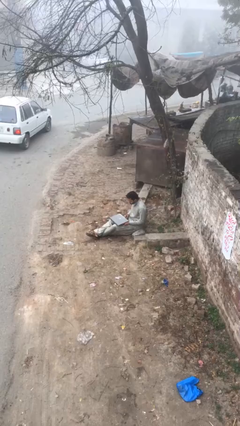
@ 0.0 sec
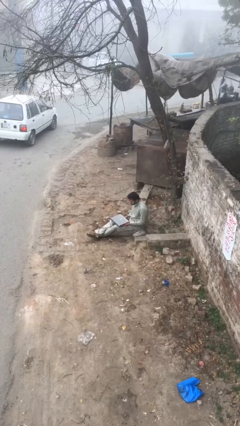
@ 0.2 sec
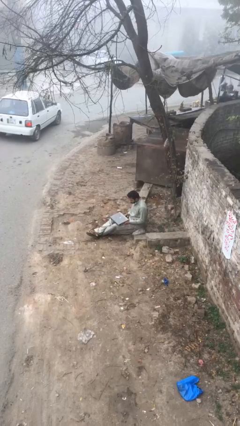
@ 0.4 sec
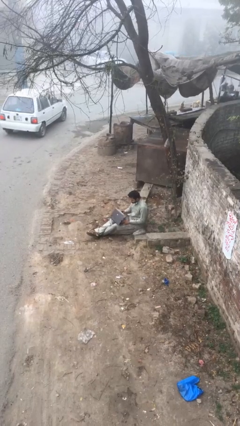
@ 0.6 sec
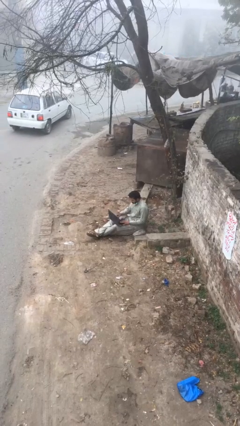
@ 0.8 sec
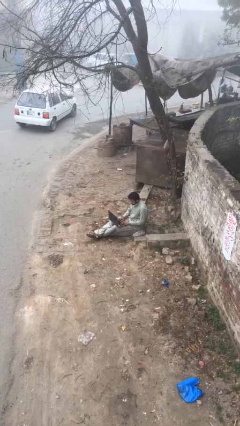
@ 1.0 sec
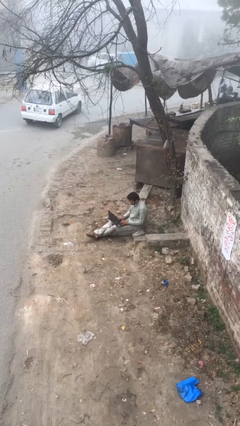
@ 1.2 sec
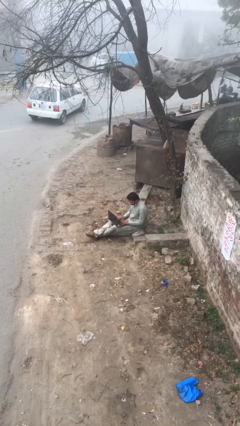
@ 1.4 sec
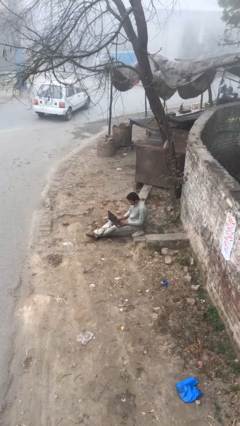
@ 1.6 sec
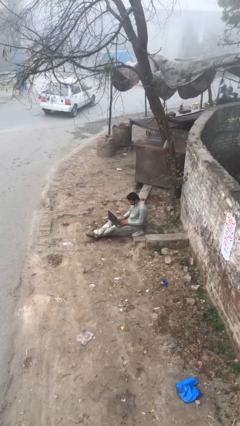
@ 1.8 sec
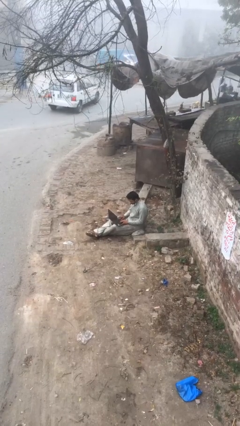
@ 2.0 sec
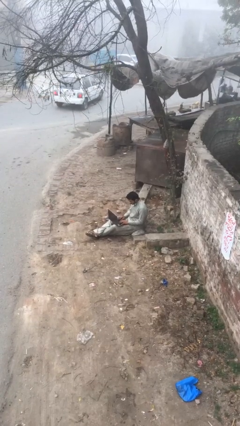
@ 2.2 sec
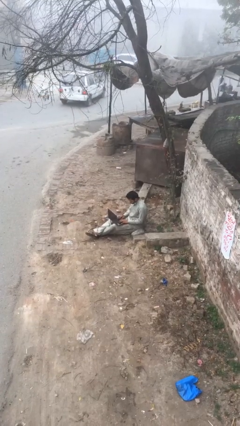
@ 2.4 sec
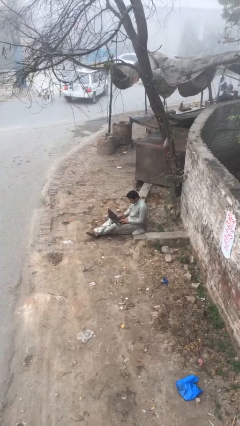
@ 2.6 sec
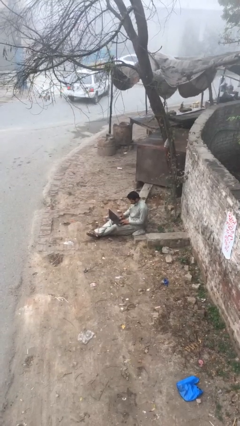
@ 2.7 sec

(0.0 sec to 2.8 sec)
person interacts with laptop

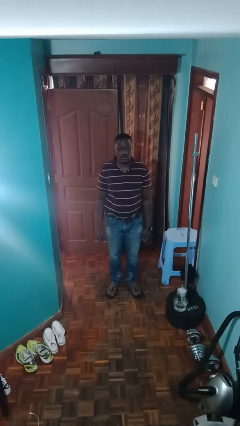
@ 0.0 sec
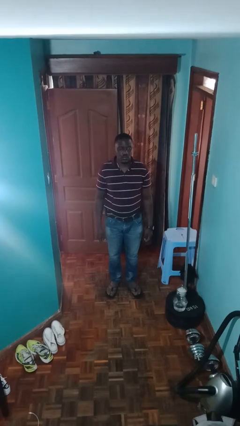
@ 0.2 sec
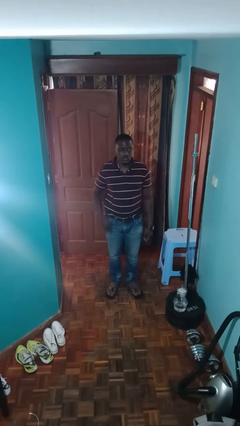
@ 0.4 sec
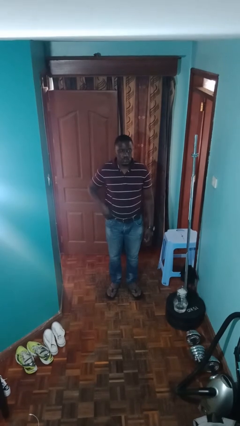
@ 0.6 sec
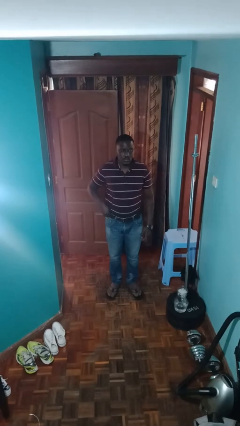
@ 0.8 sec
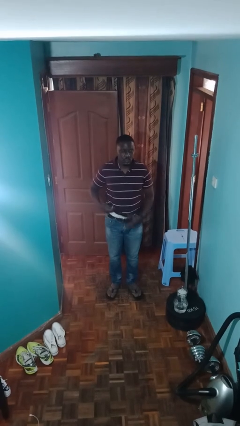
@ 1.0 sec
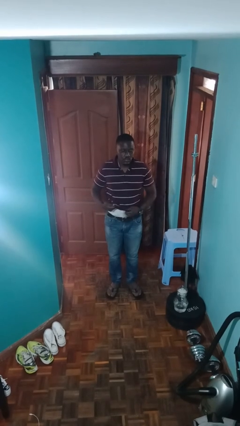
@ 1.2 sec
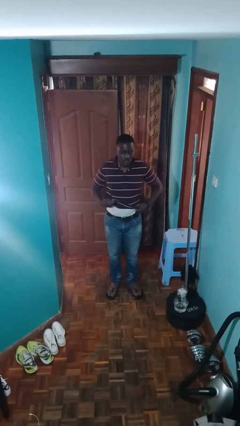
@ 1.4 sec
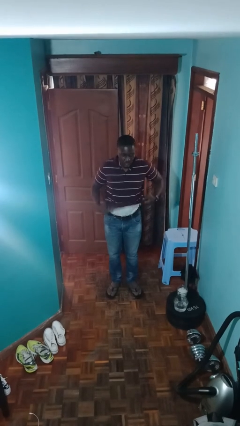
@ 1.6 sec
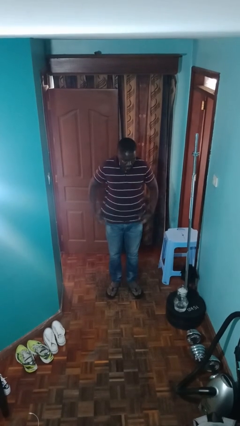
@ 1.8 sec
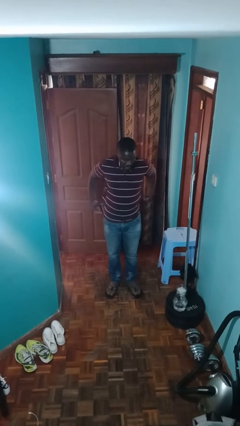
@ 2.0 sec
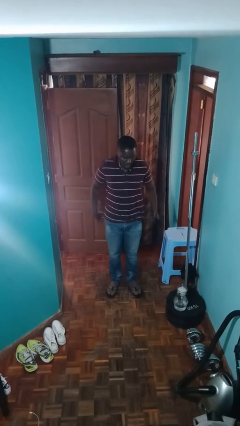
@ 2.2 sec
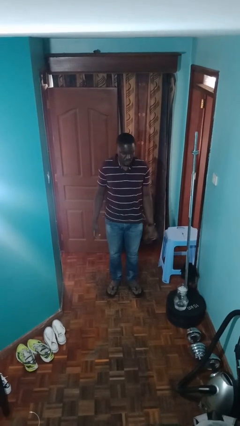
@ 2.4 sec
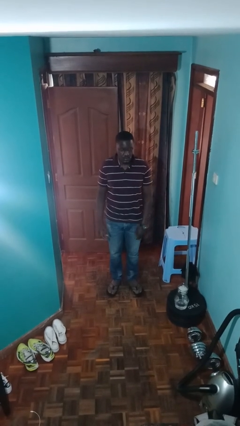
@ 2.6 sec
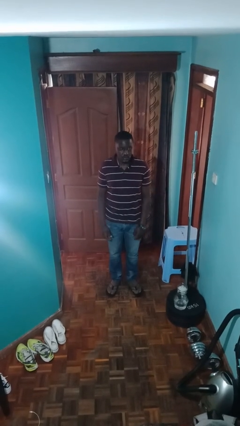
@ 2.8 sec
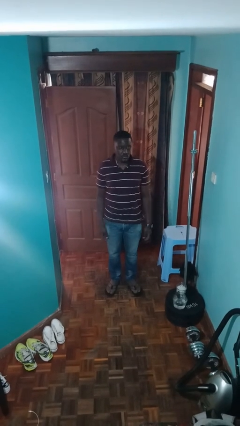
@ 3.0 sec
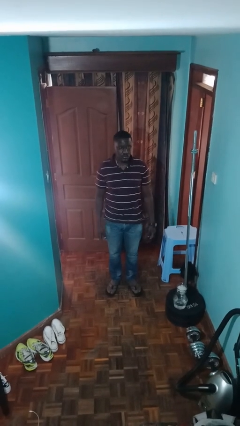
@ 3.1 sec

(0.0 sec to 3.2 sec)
person untucks shirt

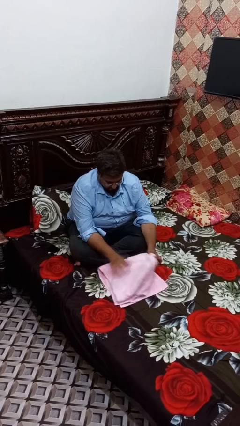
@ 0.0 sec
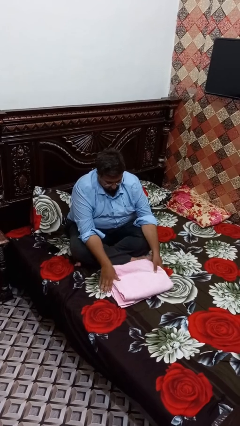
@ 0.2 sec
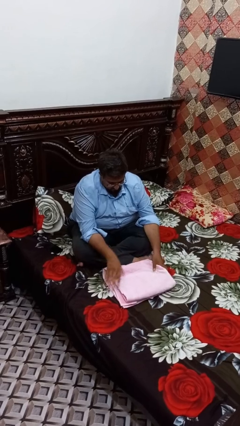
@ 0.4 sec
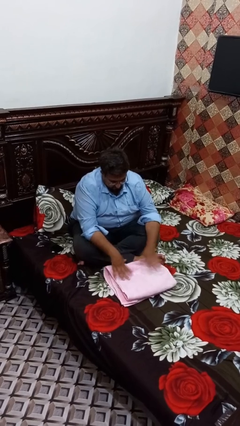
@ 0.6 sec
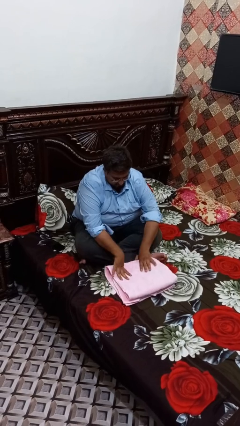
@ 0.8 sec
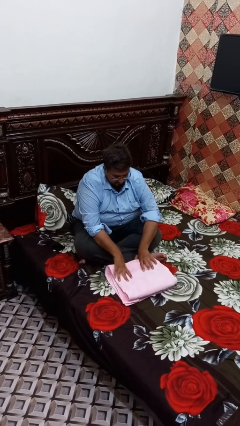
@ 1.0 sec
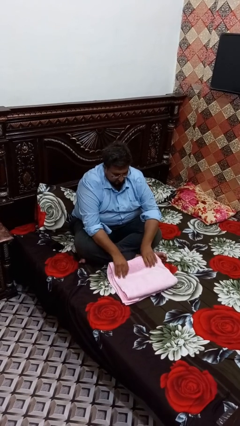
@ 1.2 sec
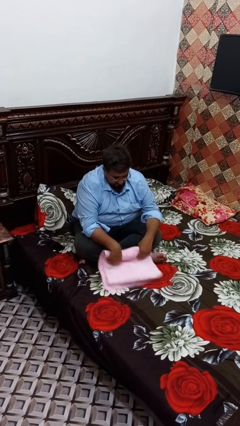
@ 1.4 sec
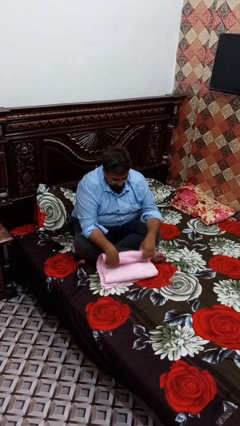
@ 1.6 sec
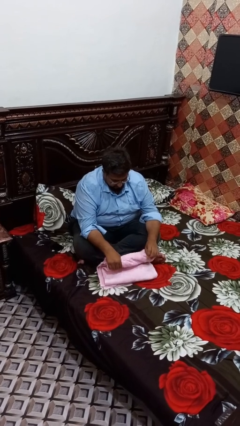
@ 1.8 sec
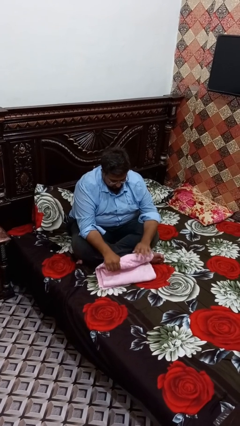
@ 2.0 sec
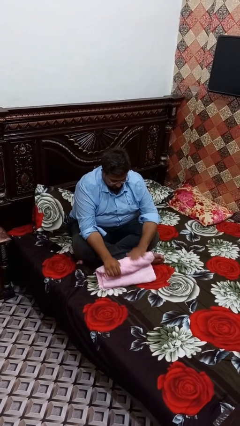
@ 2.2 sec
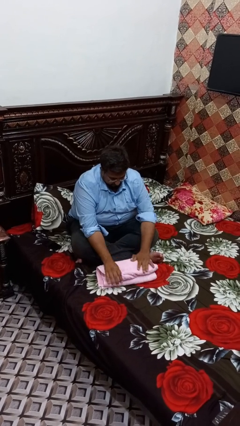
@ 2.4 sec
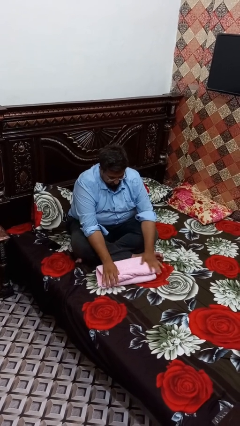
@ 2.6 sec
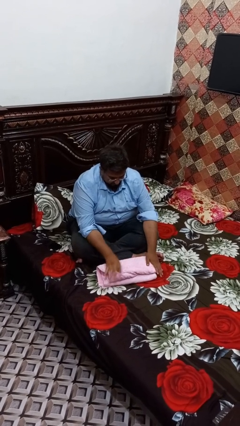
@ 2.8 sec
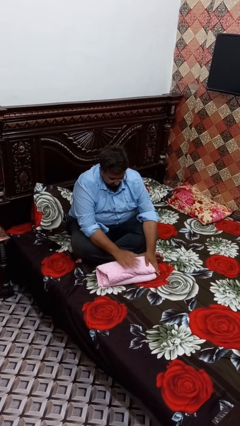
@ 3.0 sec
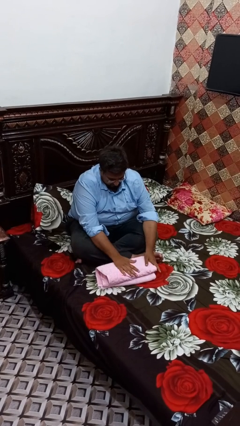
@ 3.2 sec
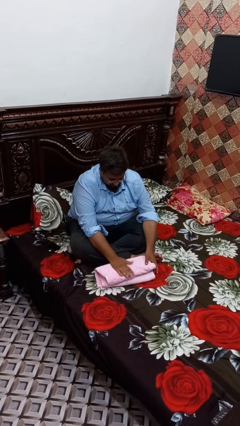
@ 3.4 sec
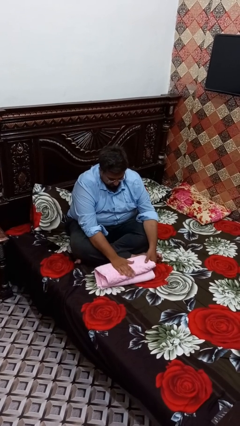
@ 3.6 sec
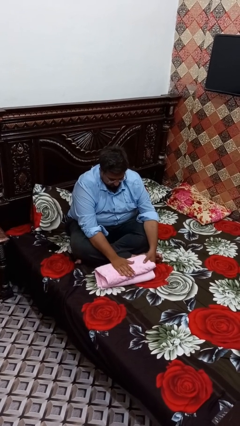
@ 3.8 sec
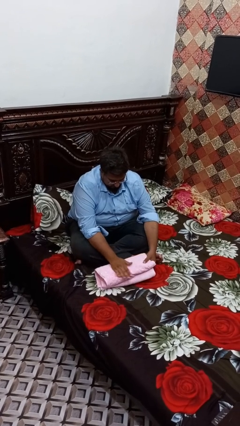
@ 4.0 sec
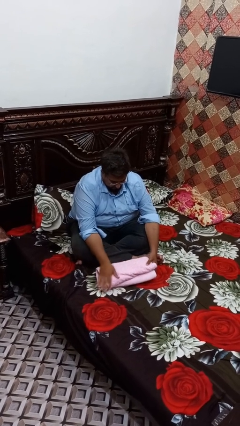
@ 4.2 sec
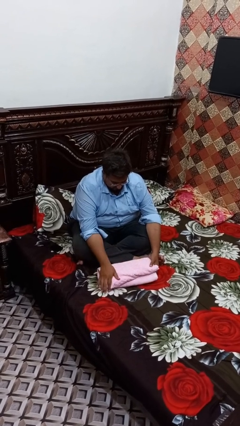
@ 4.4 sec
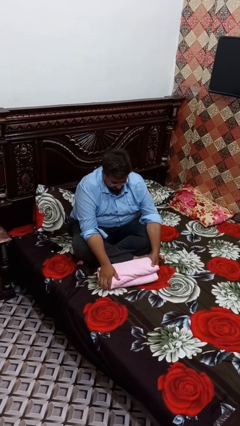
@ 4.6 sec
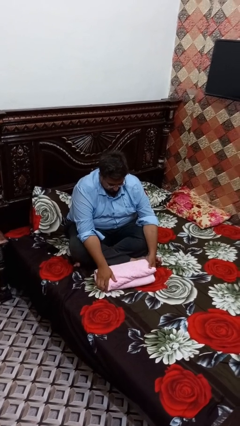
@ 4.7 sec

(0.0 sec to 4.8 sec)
person folds towel

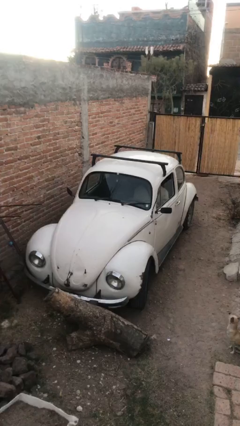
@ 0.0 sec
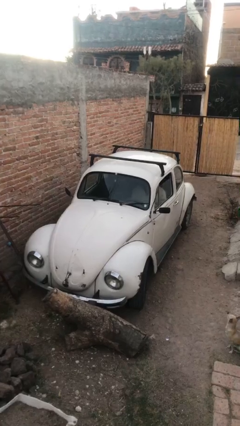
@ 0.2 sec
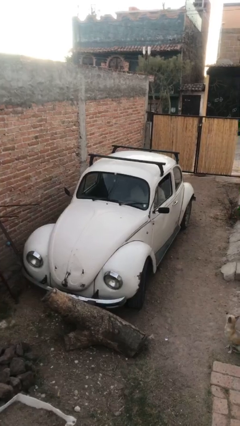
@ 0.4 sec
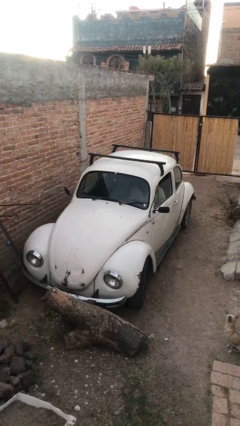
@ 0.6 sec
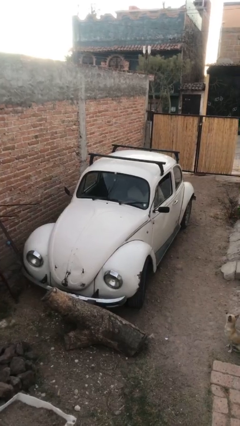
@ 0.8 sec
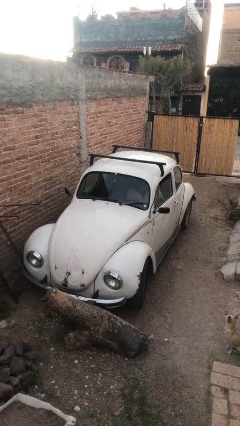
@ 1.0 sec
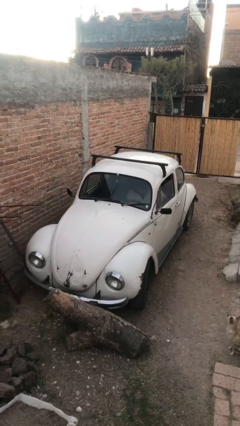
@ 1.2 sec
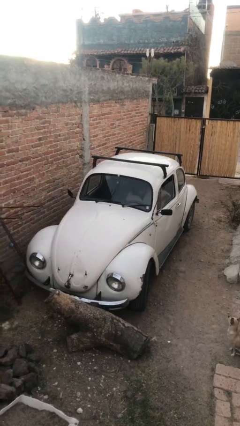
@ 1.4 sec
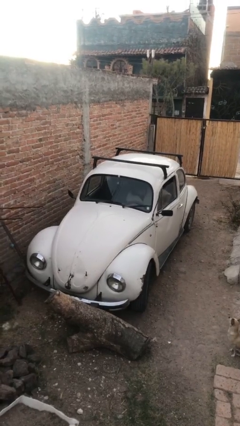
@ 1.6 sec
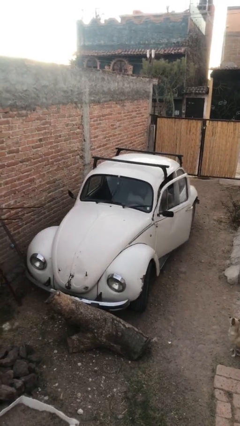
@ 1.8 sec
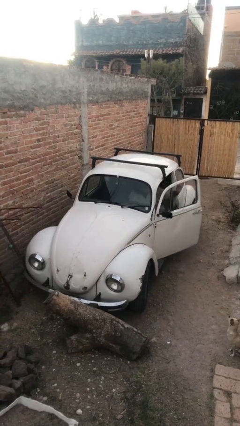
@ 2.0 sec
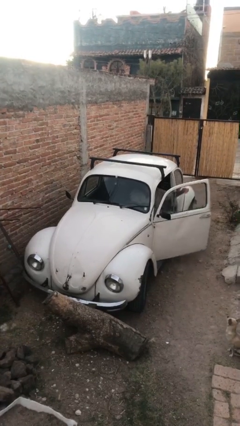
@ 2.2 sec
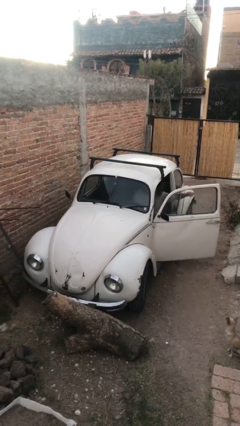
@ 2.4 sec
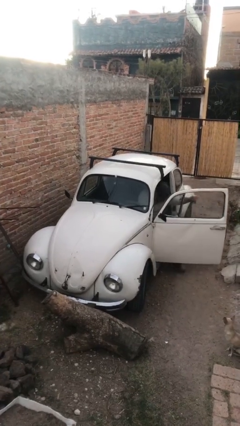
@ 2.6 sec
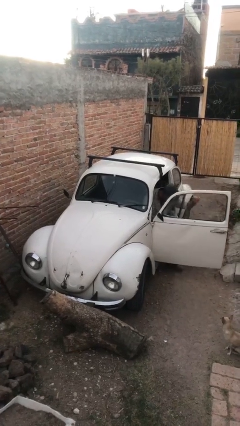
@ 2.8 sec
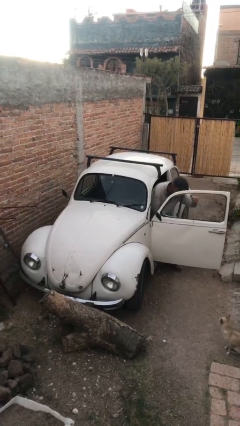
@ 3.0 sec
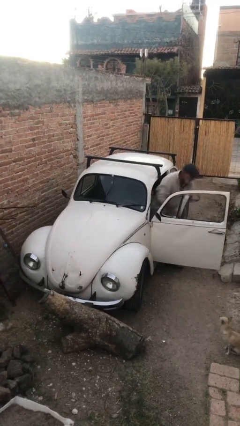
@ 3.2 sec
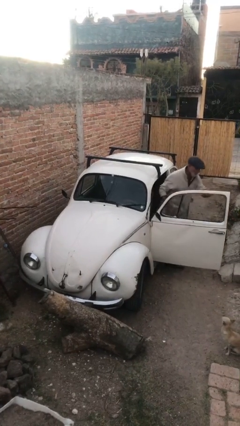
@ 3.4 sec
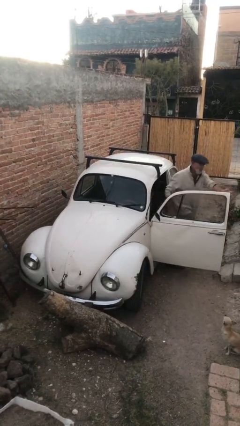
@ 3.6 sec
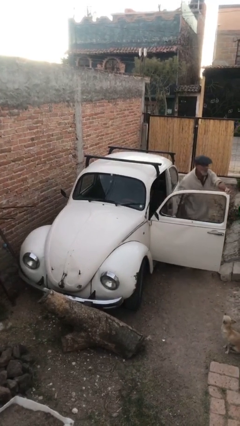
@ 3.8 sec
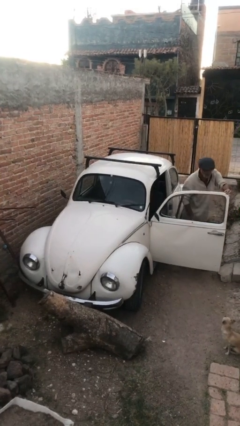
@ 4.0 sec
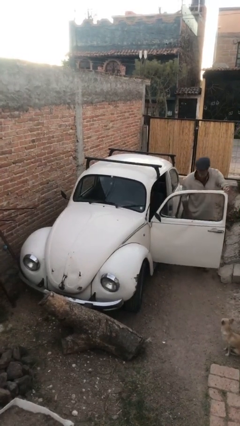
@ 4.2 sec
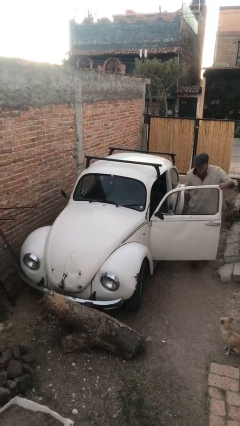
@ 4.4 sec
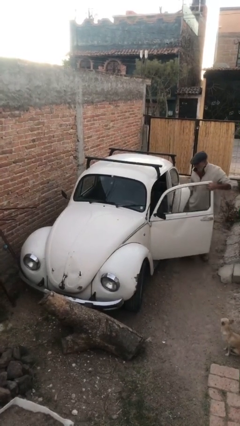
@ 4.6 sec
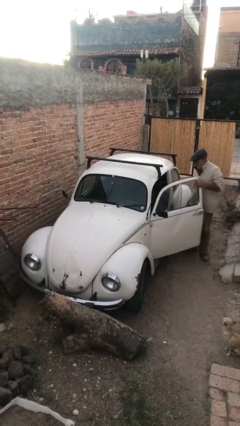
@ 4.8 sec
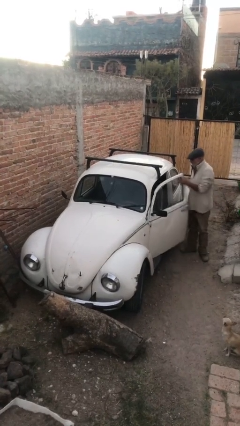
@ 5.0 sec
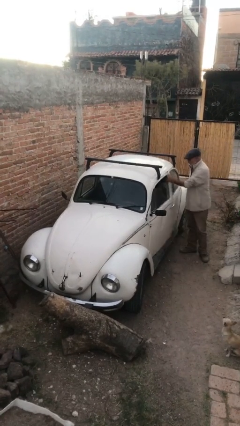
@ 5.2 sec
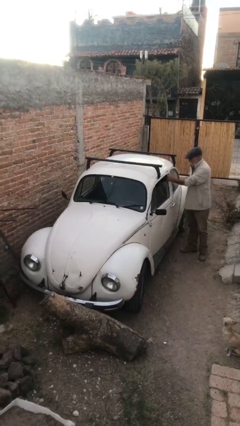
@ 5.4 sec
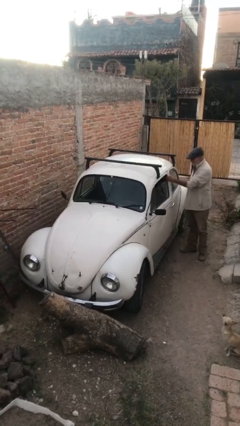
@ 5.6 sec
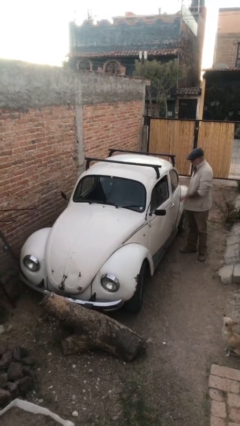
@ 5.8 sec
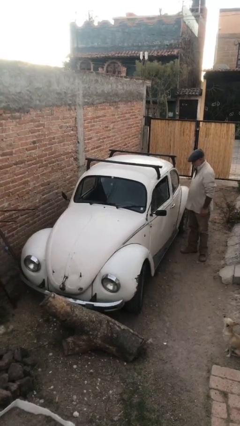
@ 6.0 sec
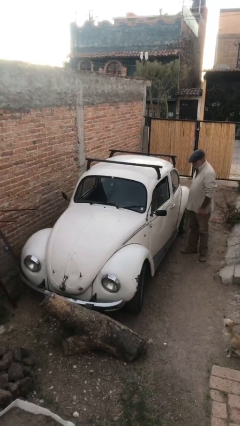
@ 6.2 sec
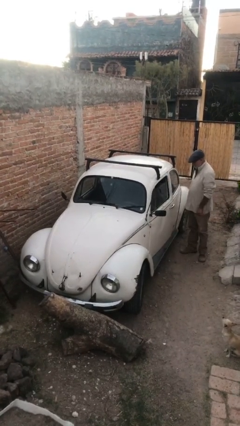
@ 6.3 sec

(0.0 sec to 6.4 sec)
car drops off person

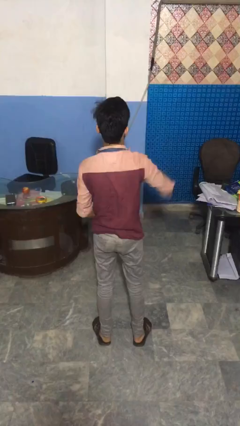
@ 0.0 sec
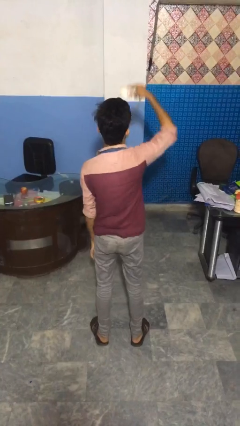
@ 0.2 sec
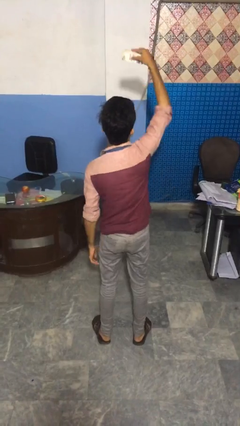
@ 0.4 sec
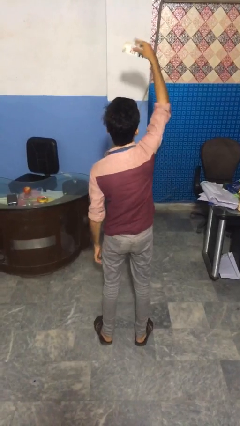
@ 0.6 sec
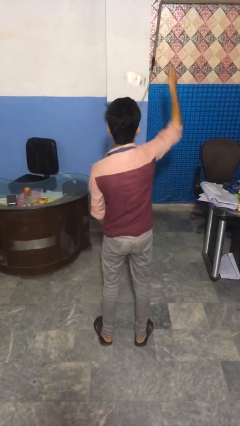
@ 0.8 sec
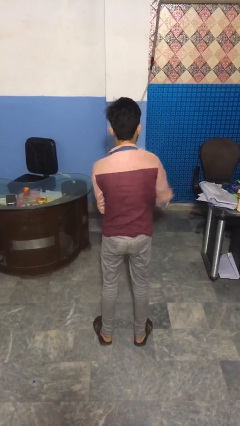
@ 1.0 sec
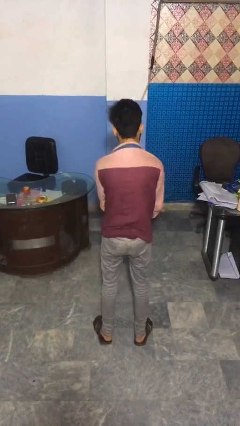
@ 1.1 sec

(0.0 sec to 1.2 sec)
person drops object
